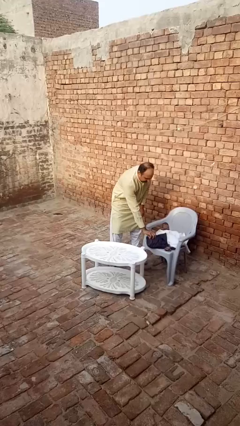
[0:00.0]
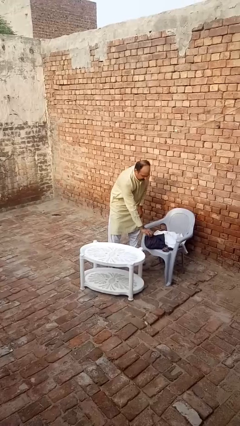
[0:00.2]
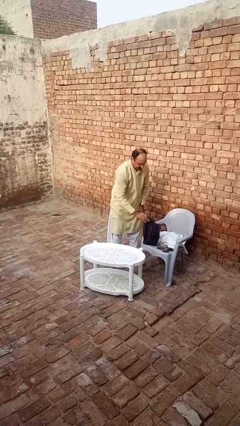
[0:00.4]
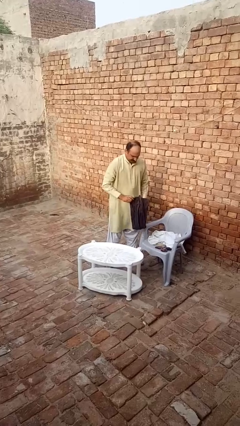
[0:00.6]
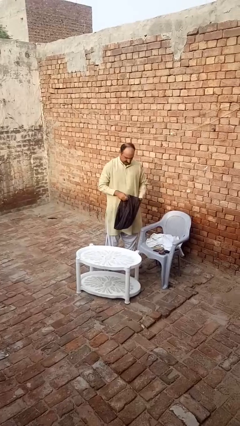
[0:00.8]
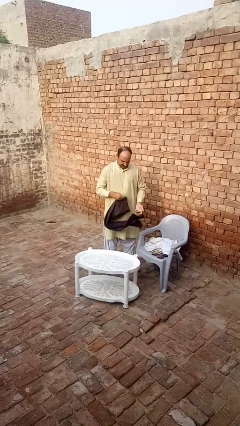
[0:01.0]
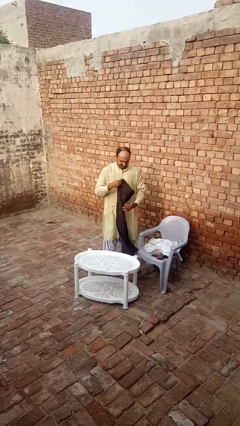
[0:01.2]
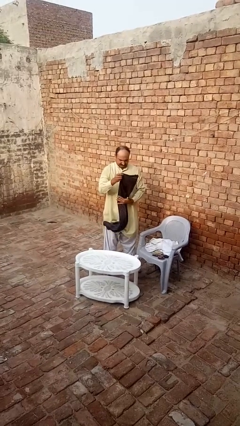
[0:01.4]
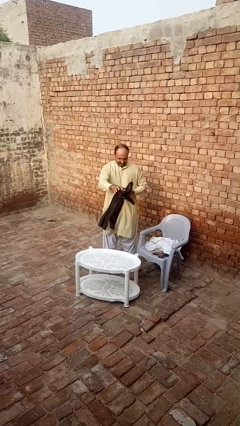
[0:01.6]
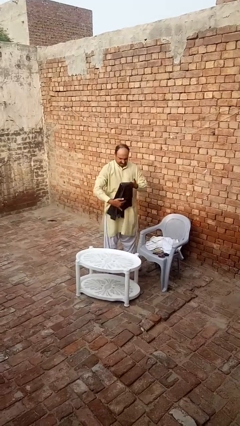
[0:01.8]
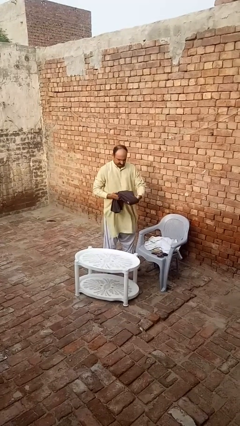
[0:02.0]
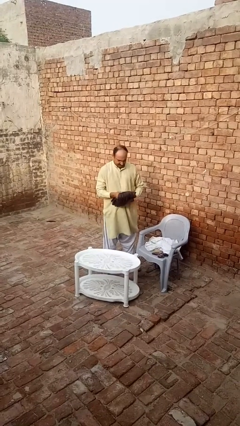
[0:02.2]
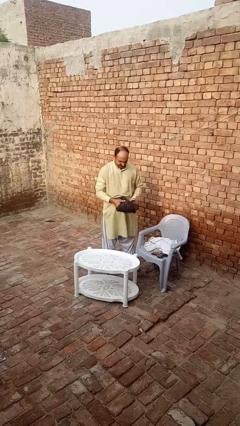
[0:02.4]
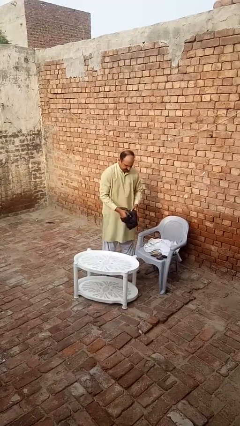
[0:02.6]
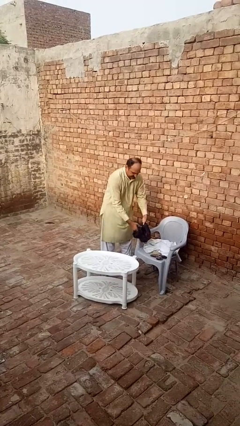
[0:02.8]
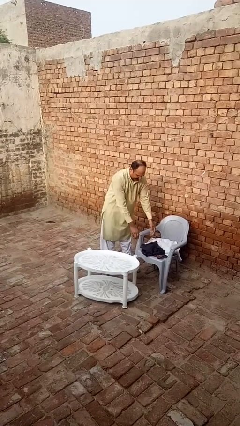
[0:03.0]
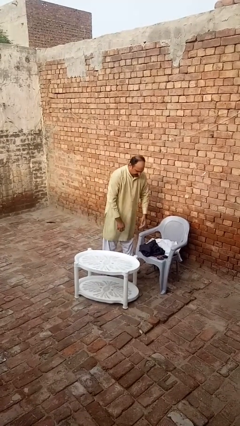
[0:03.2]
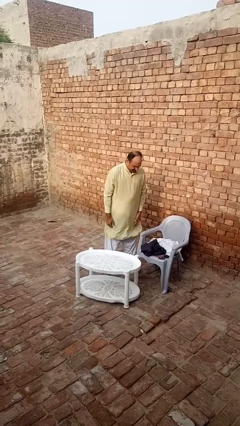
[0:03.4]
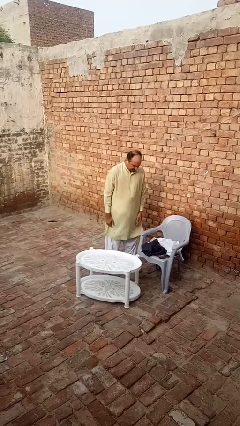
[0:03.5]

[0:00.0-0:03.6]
person folds pants

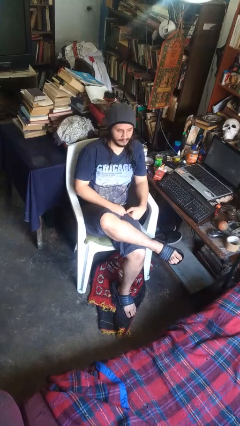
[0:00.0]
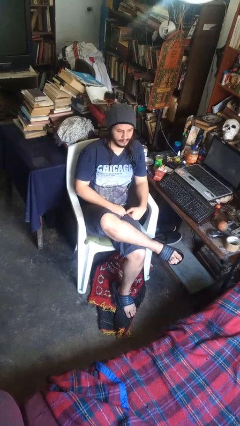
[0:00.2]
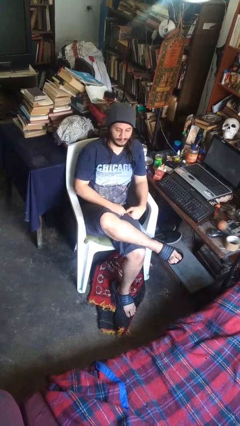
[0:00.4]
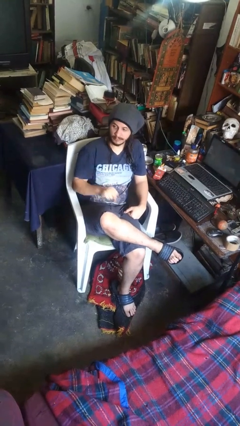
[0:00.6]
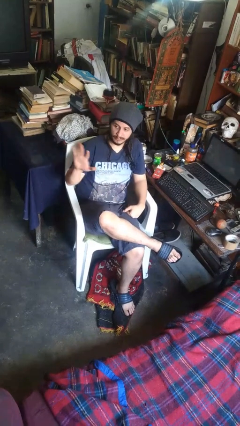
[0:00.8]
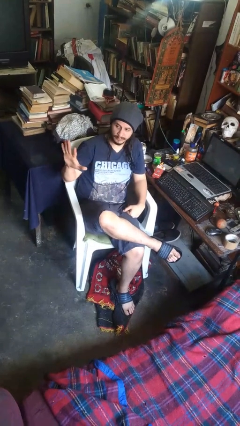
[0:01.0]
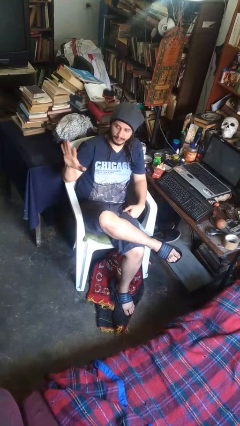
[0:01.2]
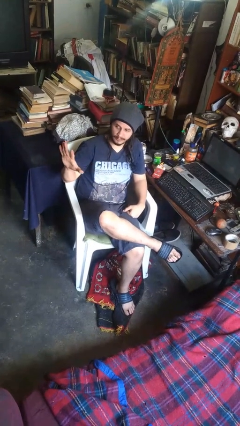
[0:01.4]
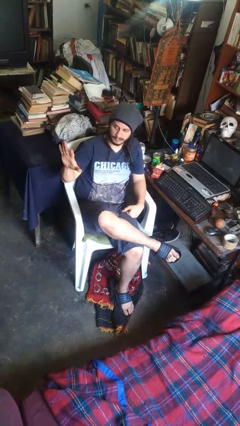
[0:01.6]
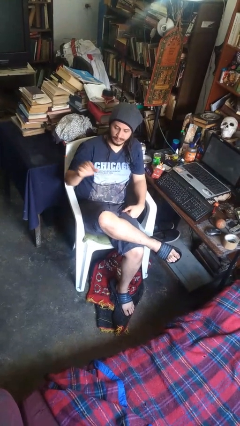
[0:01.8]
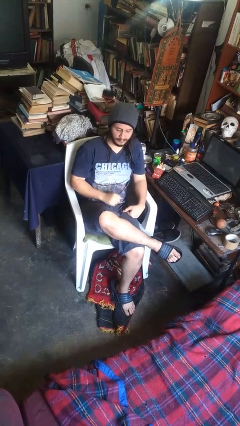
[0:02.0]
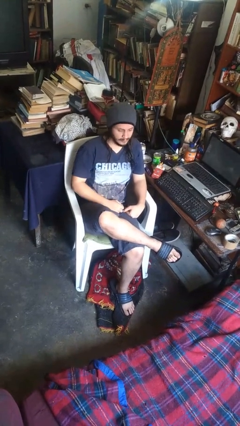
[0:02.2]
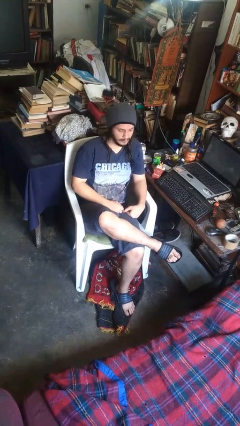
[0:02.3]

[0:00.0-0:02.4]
person gestures number five

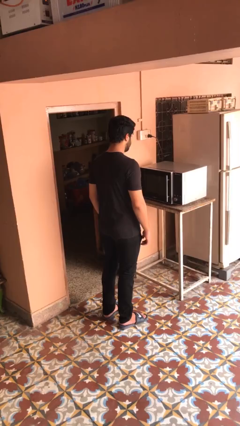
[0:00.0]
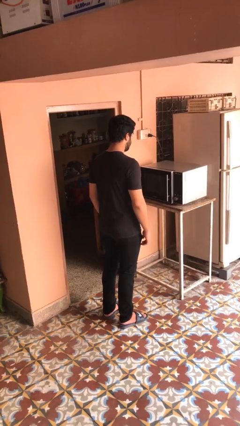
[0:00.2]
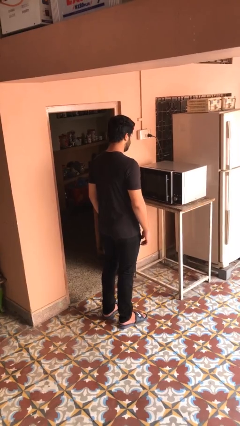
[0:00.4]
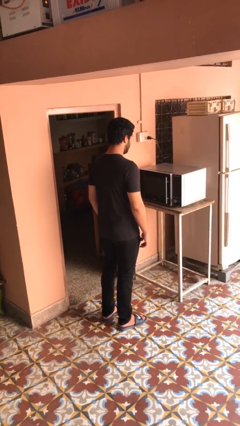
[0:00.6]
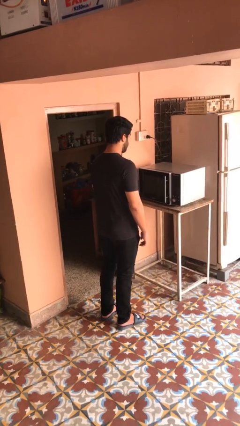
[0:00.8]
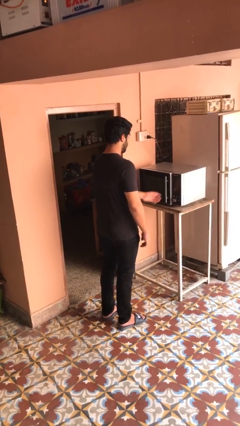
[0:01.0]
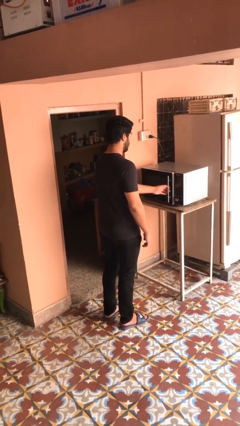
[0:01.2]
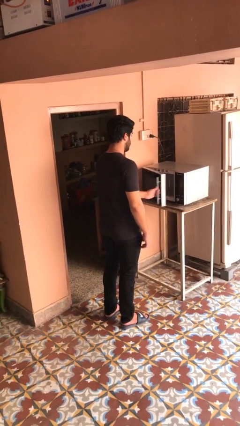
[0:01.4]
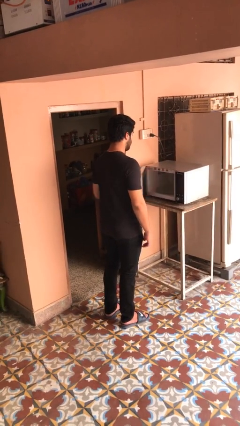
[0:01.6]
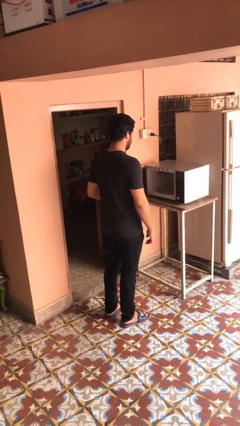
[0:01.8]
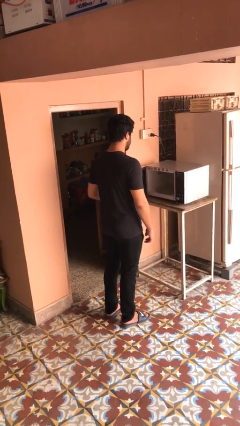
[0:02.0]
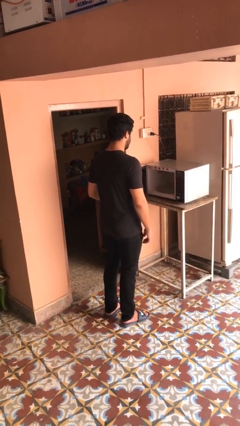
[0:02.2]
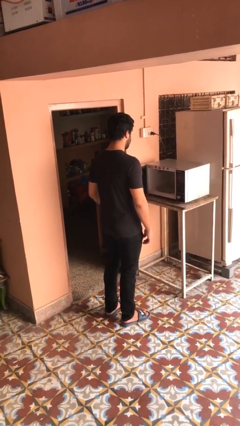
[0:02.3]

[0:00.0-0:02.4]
person opens microwave

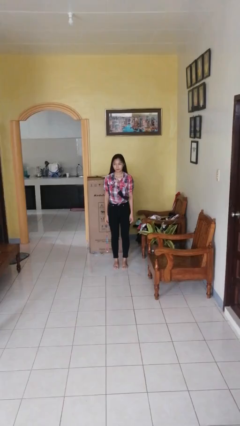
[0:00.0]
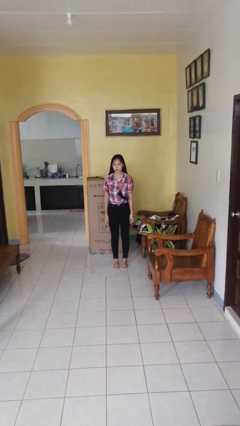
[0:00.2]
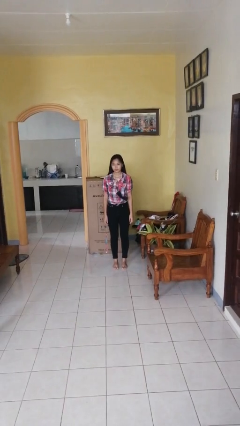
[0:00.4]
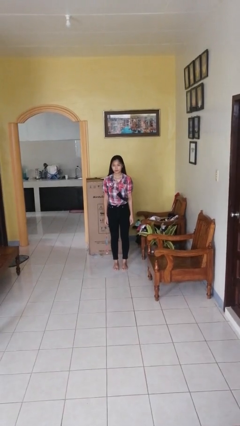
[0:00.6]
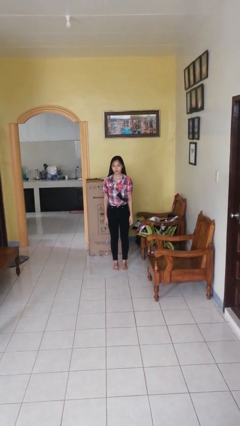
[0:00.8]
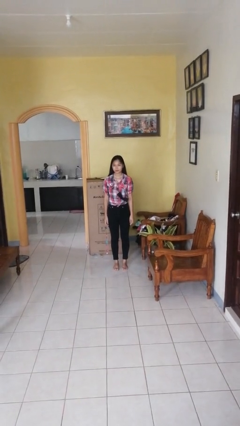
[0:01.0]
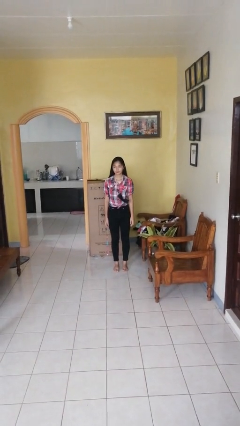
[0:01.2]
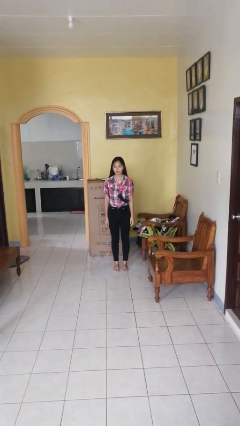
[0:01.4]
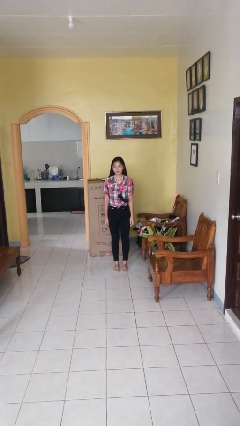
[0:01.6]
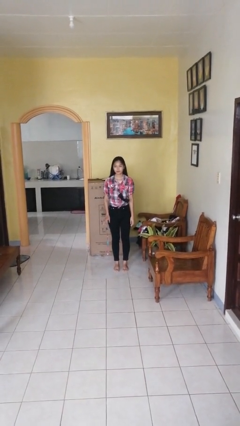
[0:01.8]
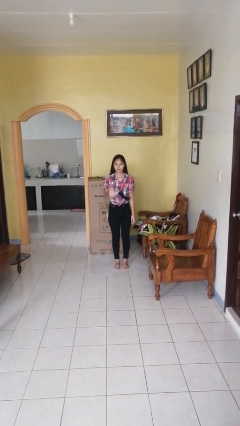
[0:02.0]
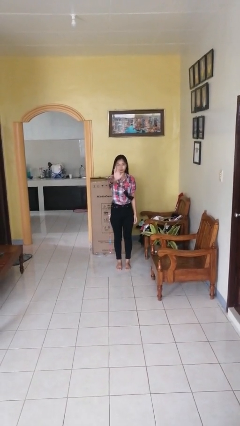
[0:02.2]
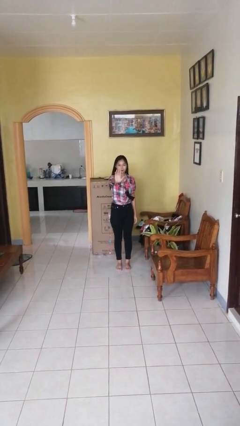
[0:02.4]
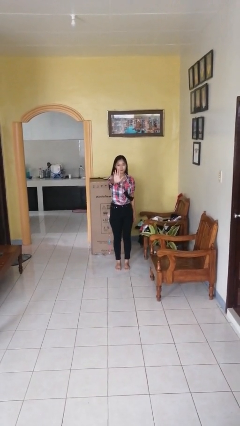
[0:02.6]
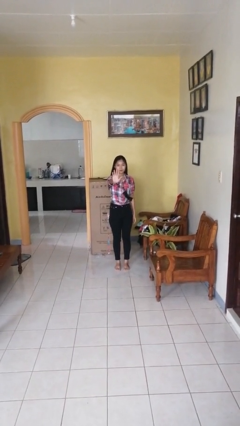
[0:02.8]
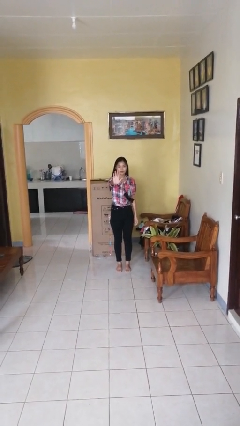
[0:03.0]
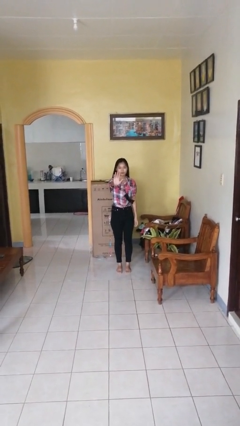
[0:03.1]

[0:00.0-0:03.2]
person gestures stop

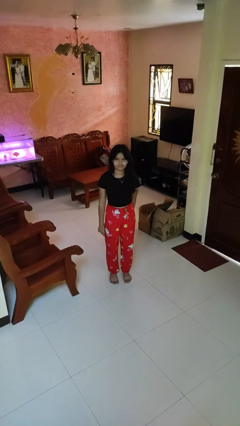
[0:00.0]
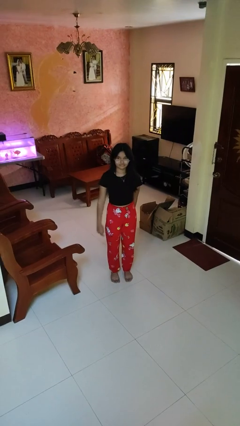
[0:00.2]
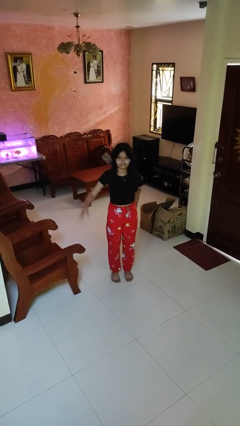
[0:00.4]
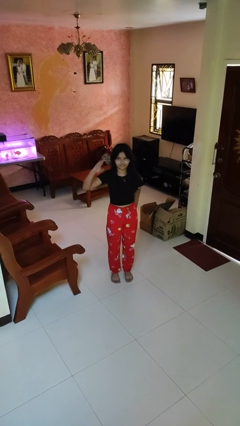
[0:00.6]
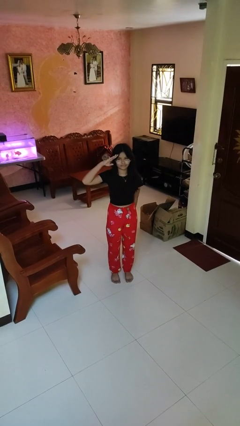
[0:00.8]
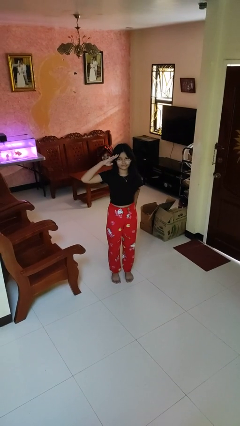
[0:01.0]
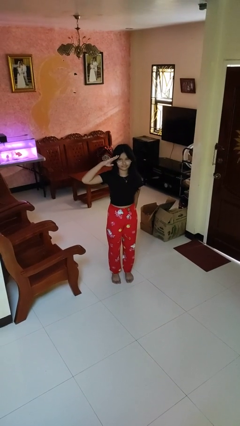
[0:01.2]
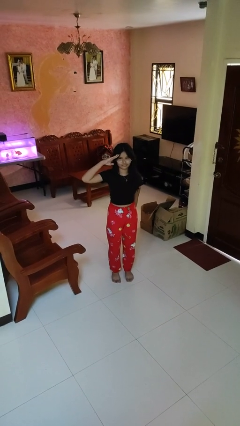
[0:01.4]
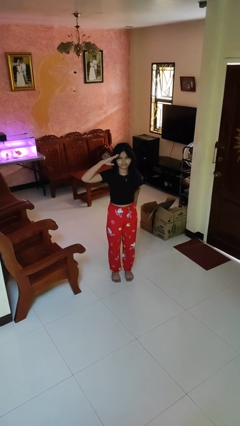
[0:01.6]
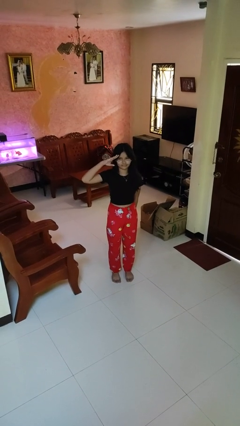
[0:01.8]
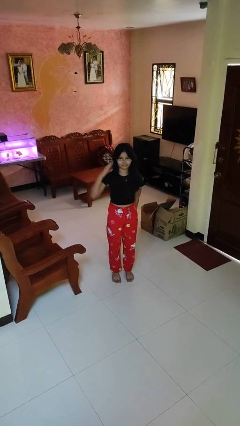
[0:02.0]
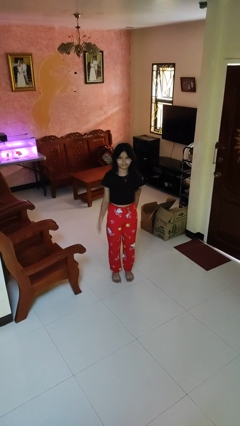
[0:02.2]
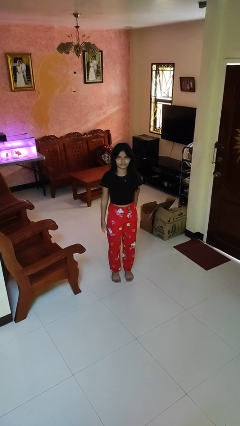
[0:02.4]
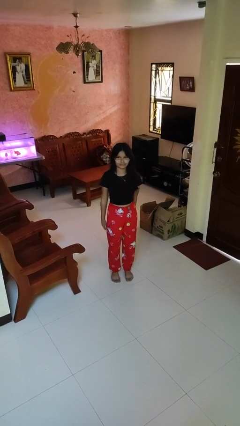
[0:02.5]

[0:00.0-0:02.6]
person salutes

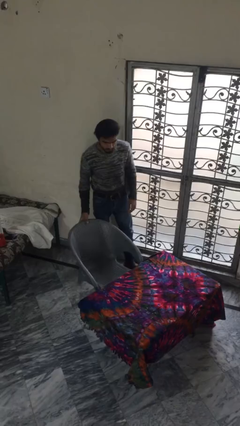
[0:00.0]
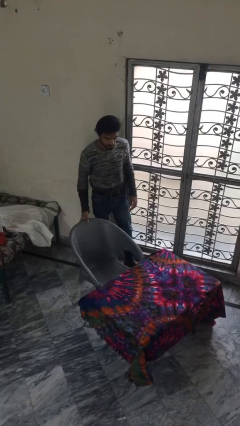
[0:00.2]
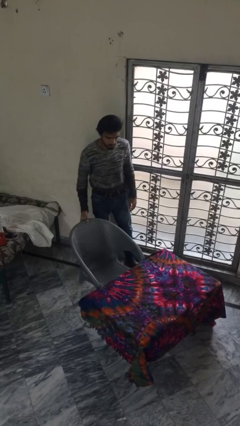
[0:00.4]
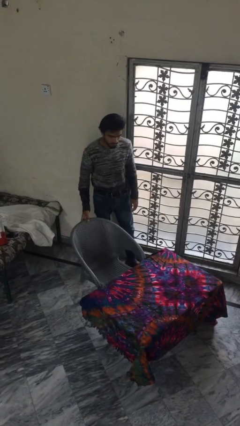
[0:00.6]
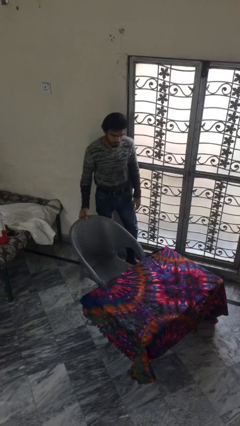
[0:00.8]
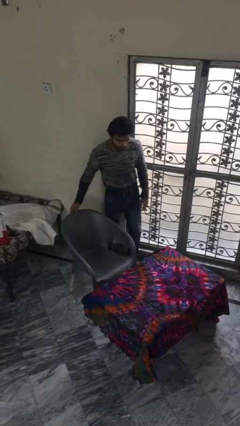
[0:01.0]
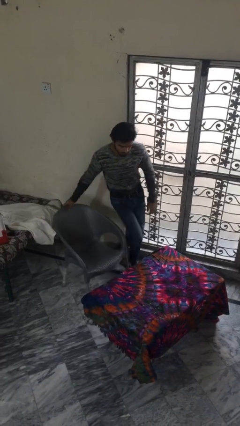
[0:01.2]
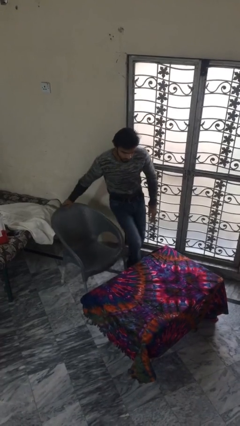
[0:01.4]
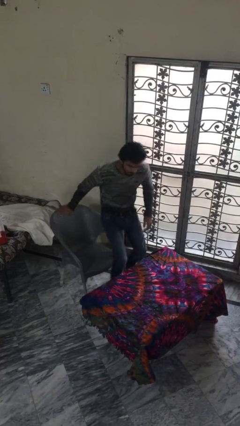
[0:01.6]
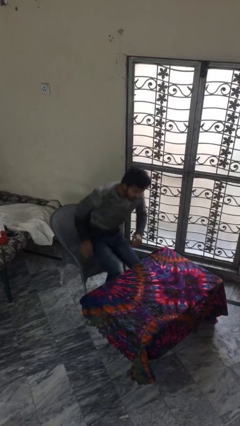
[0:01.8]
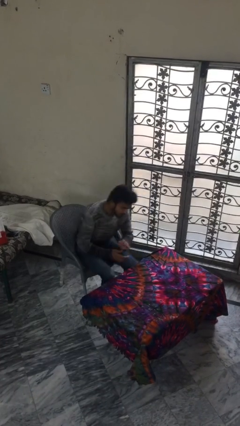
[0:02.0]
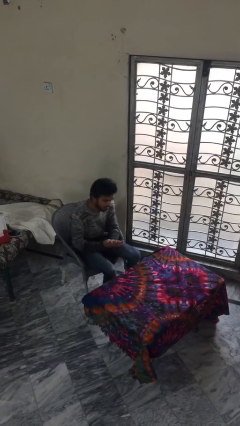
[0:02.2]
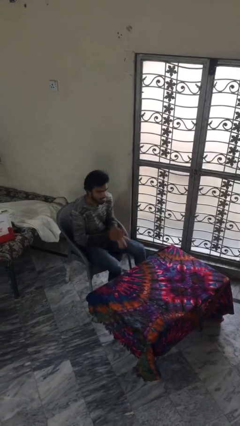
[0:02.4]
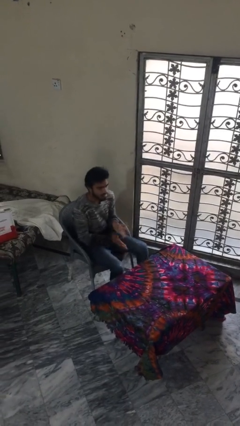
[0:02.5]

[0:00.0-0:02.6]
person sits down

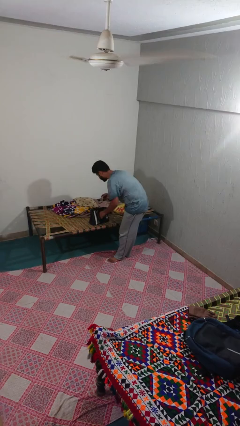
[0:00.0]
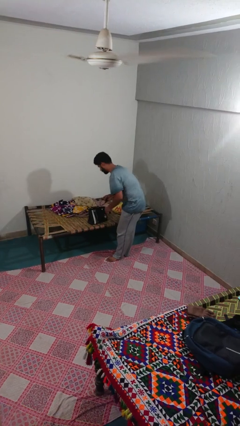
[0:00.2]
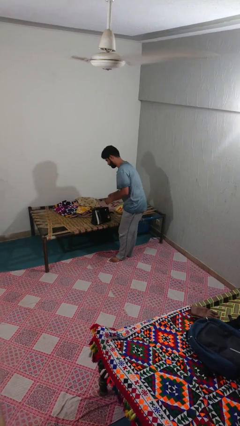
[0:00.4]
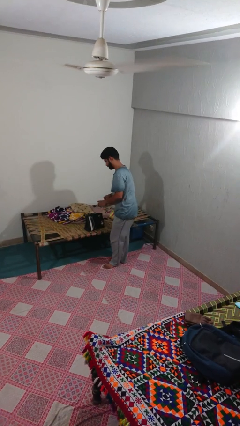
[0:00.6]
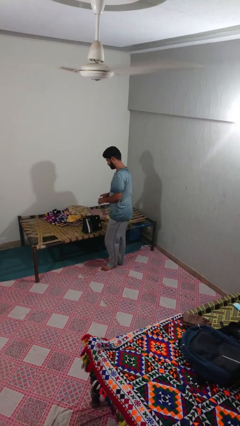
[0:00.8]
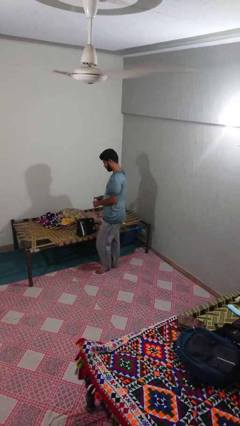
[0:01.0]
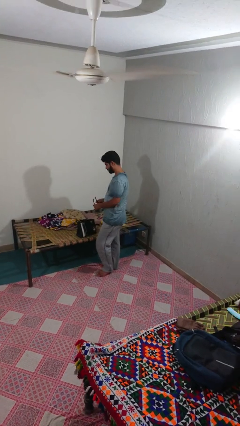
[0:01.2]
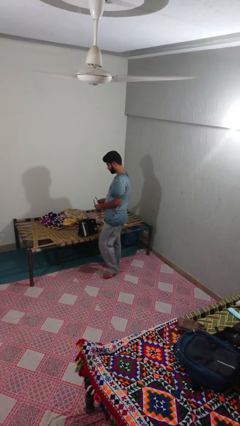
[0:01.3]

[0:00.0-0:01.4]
person takes object from purse
